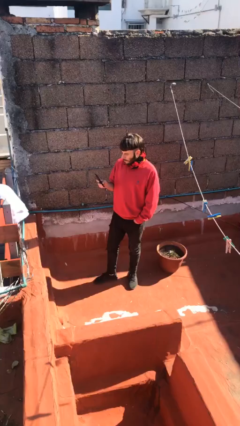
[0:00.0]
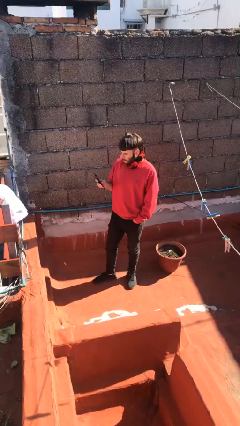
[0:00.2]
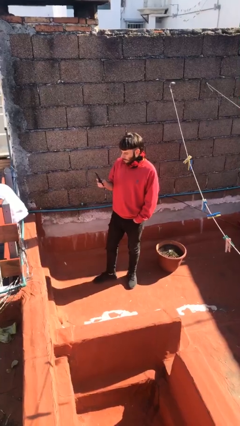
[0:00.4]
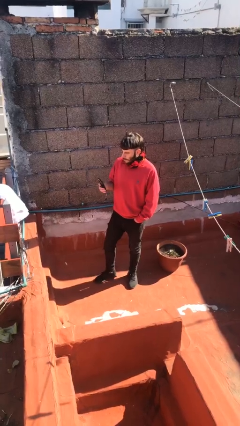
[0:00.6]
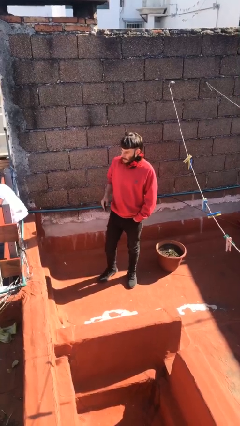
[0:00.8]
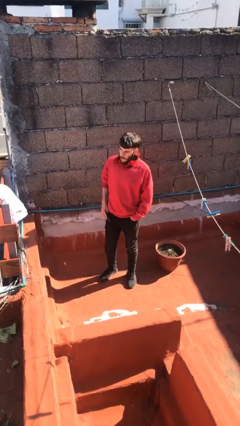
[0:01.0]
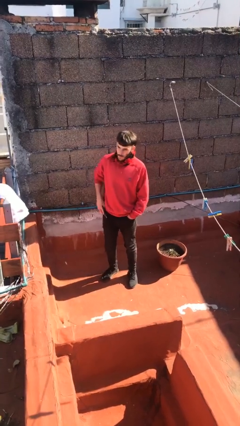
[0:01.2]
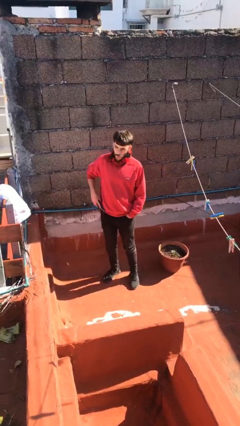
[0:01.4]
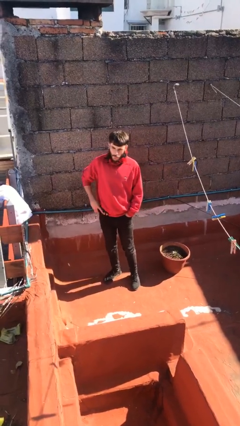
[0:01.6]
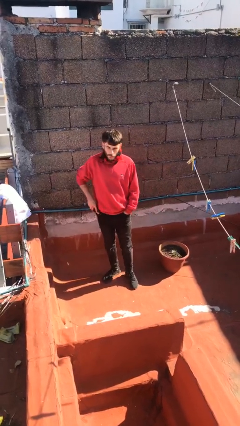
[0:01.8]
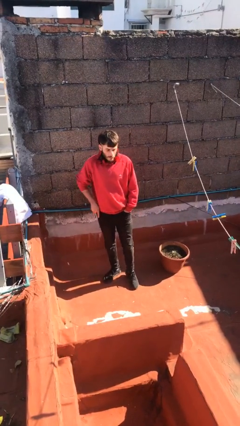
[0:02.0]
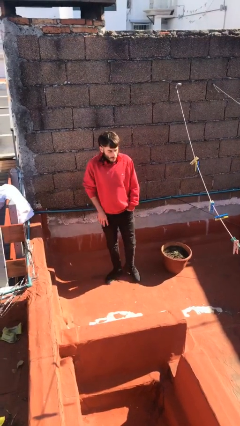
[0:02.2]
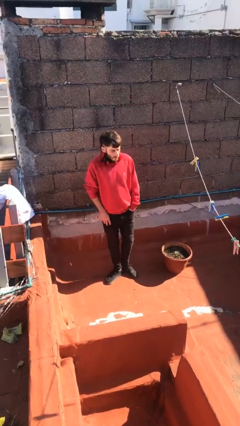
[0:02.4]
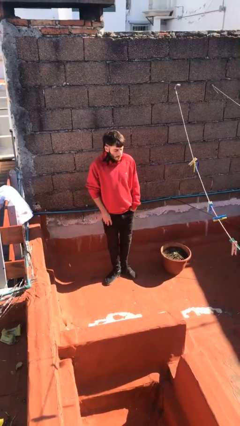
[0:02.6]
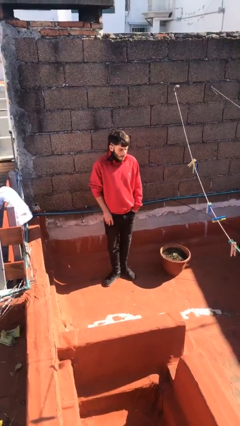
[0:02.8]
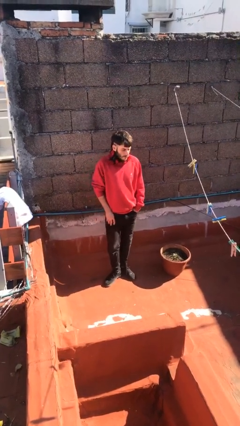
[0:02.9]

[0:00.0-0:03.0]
person puts phone into pocket

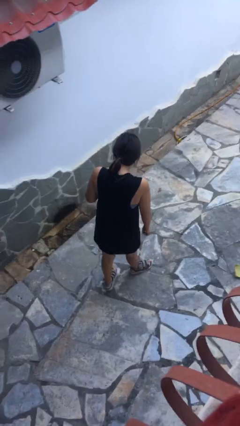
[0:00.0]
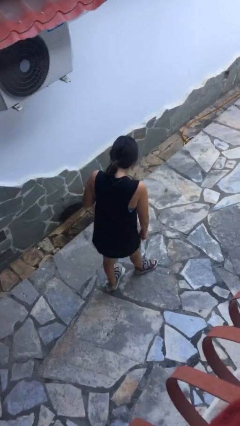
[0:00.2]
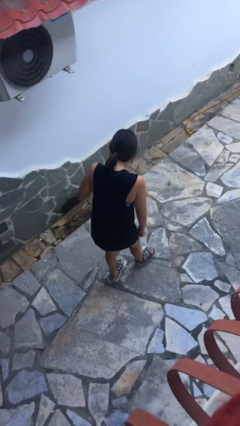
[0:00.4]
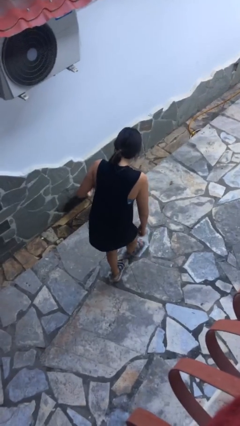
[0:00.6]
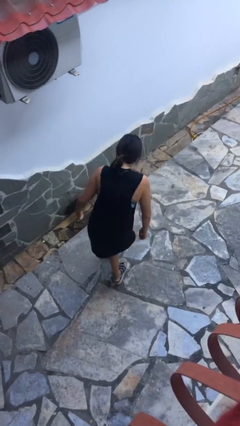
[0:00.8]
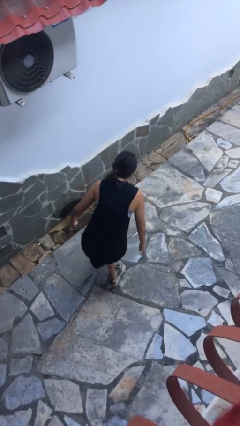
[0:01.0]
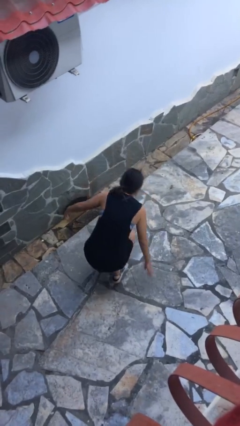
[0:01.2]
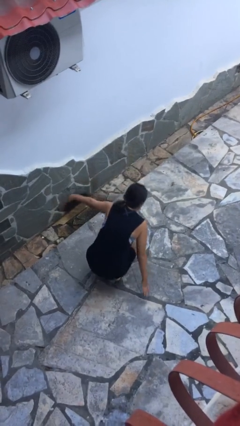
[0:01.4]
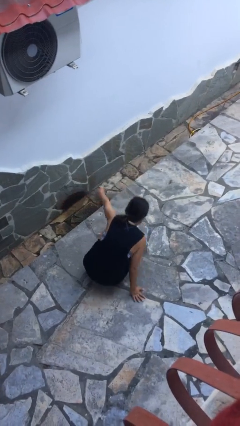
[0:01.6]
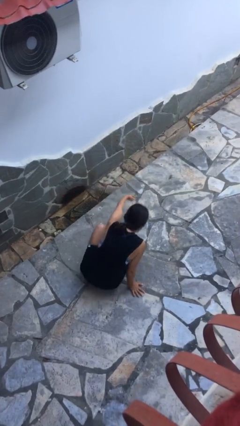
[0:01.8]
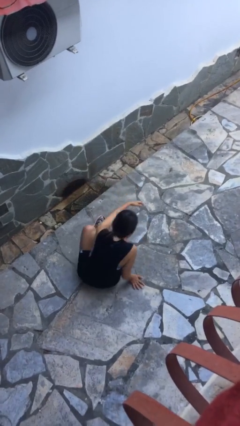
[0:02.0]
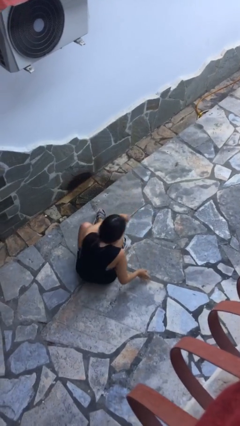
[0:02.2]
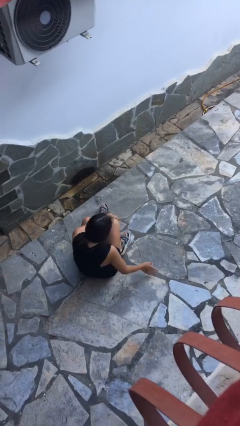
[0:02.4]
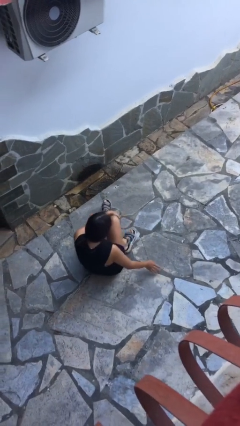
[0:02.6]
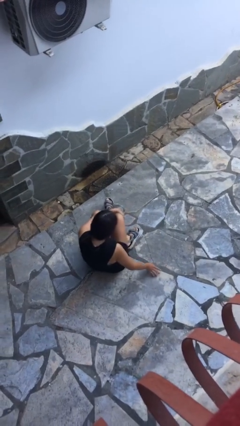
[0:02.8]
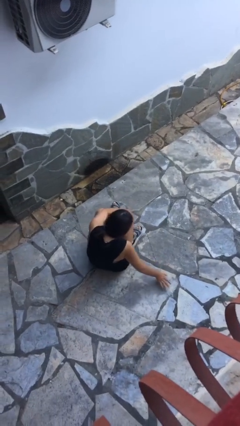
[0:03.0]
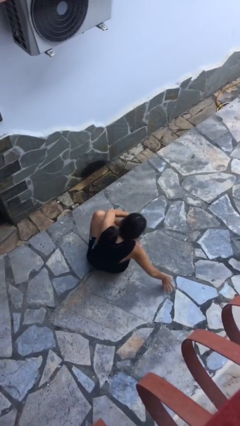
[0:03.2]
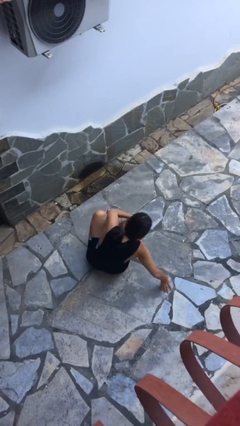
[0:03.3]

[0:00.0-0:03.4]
person sits crisscross

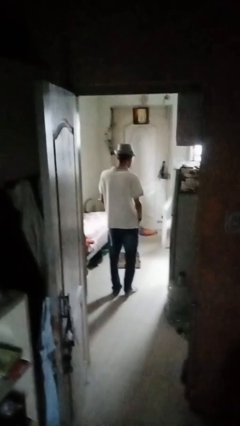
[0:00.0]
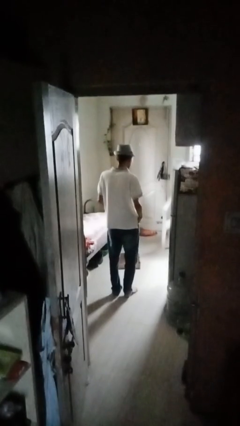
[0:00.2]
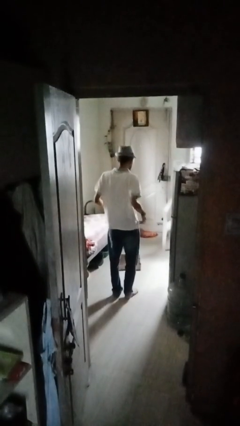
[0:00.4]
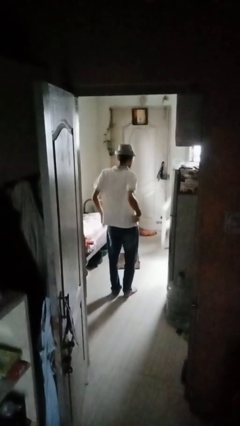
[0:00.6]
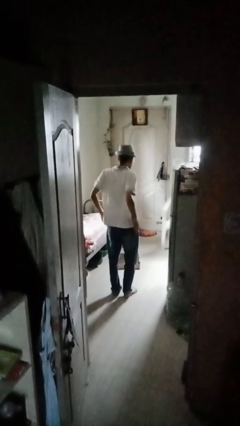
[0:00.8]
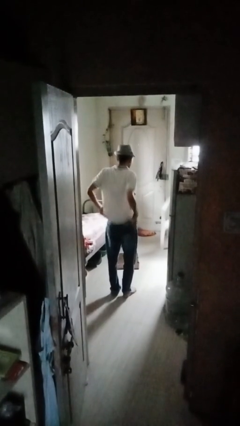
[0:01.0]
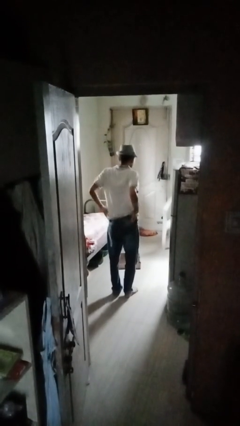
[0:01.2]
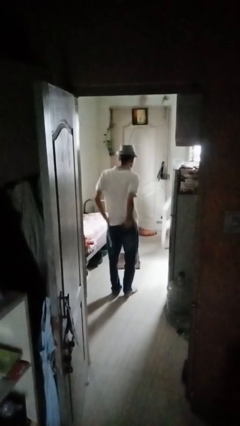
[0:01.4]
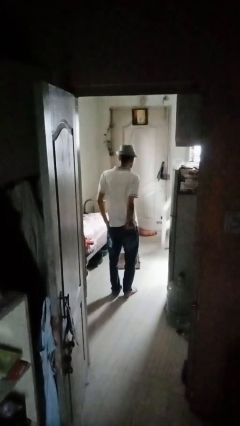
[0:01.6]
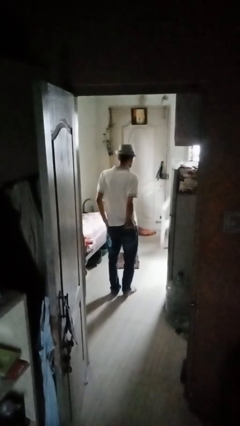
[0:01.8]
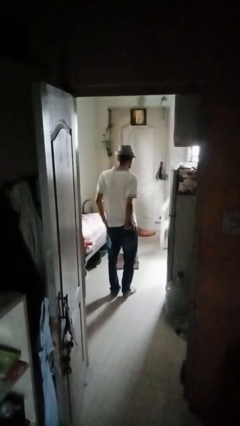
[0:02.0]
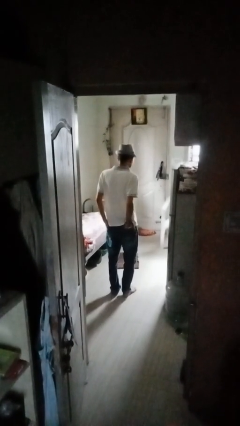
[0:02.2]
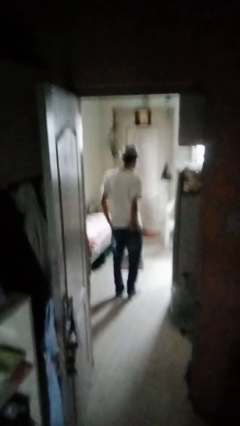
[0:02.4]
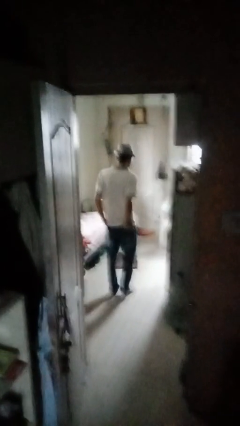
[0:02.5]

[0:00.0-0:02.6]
person puts hands in back pockets

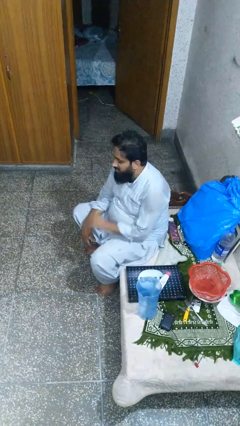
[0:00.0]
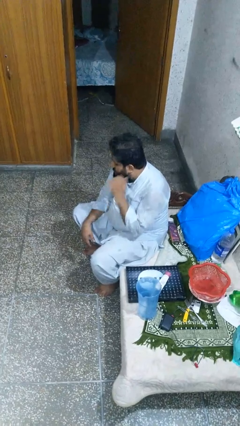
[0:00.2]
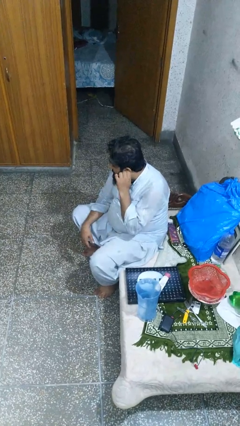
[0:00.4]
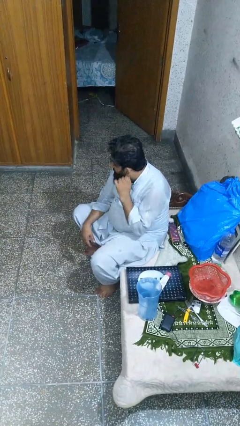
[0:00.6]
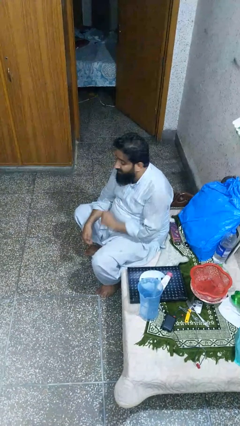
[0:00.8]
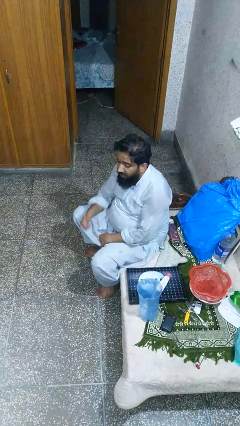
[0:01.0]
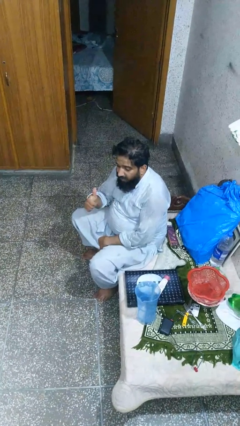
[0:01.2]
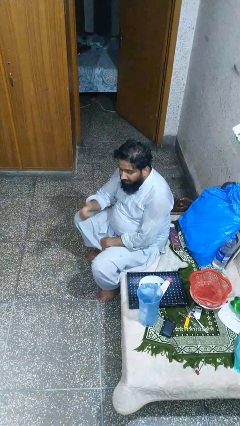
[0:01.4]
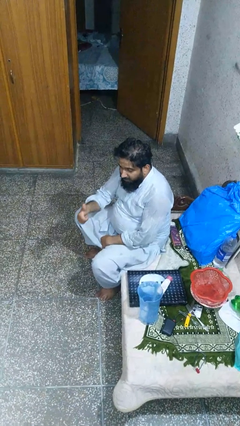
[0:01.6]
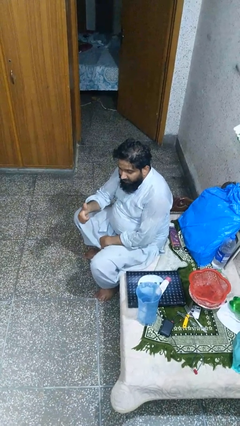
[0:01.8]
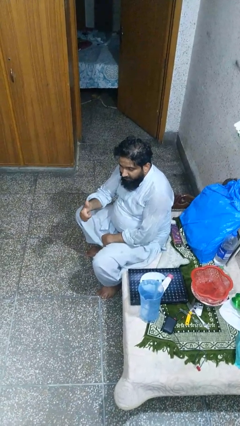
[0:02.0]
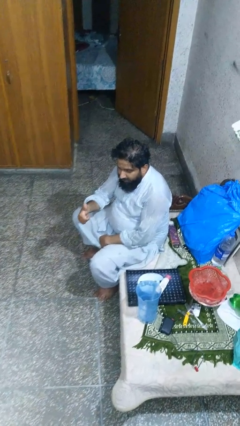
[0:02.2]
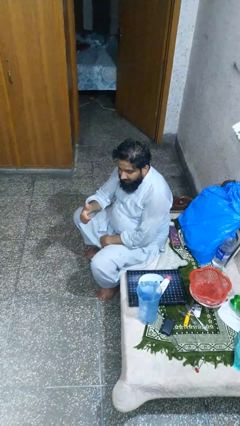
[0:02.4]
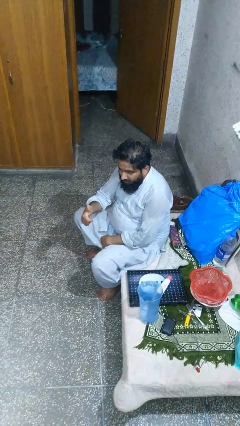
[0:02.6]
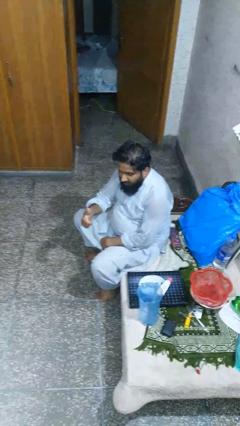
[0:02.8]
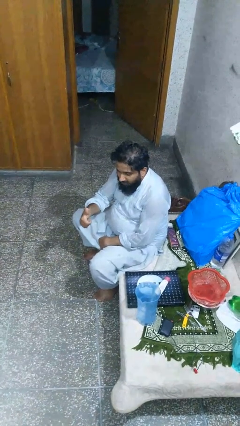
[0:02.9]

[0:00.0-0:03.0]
person gestures thumbs up

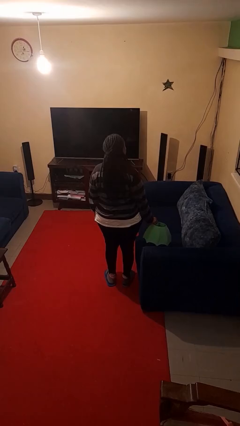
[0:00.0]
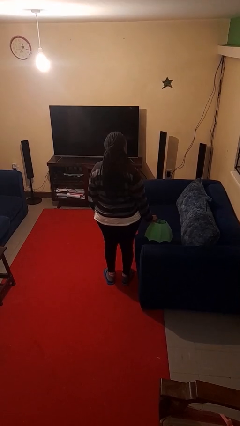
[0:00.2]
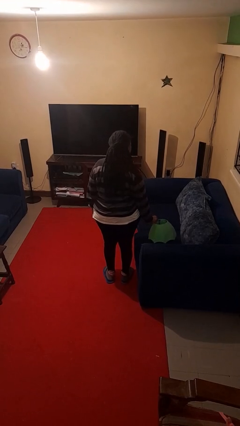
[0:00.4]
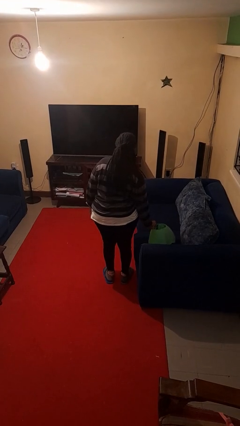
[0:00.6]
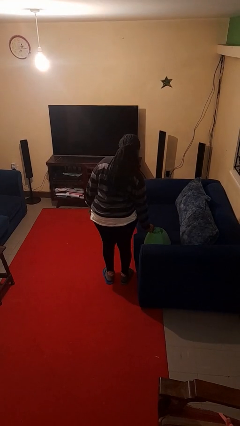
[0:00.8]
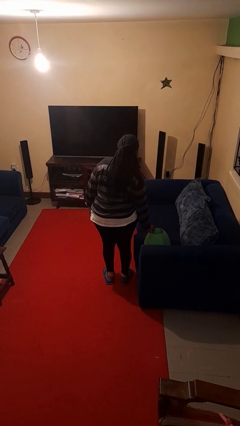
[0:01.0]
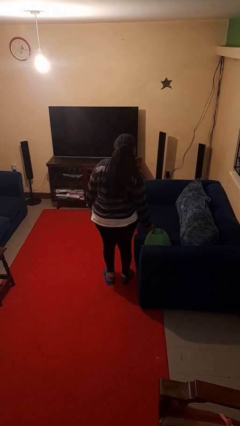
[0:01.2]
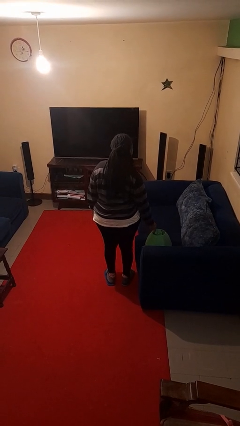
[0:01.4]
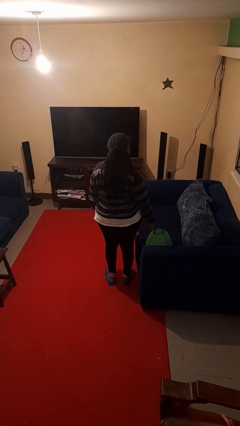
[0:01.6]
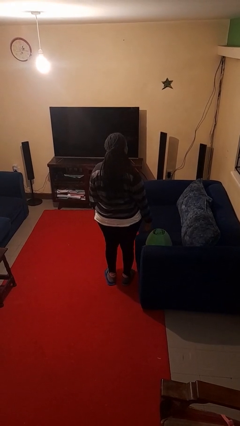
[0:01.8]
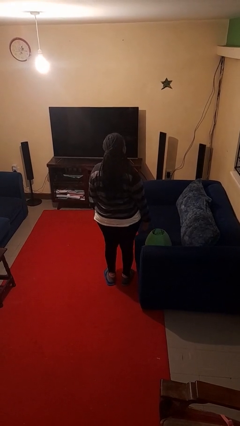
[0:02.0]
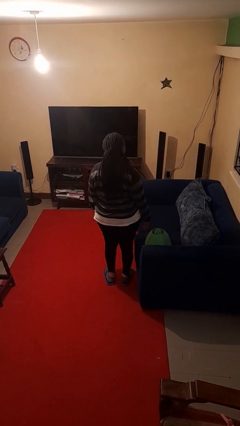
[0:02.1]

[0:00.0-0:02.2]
person puts down object on couch

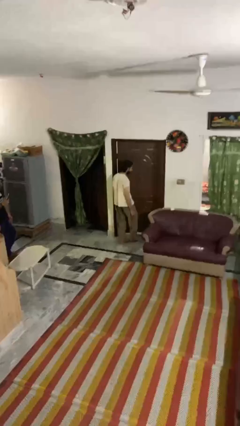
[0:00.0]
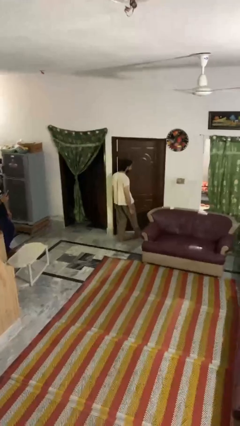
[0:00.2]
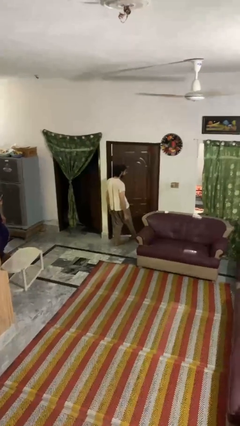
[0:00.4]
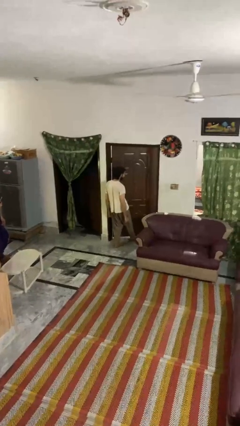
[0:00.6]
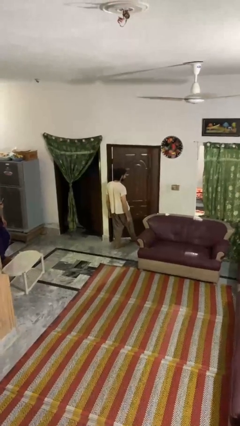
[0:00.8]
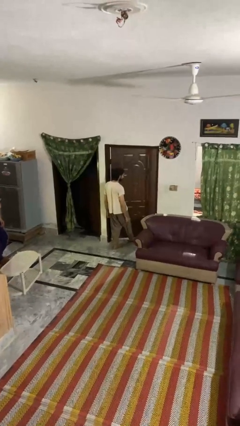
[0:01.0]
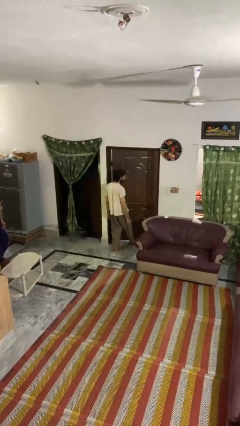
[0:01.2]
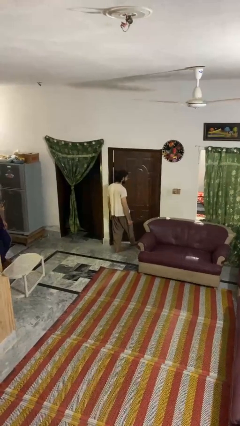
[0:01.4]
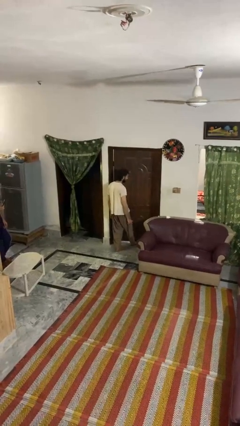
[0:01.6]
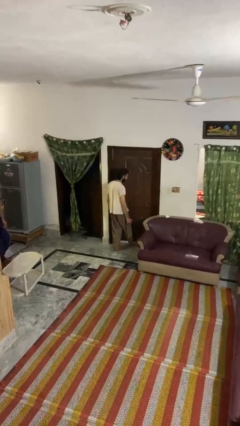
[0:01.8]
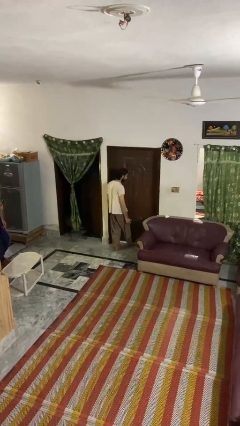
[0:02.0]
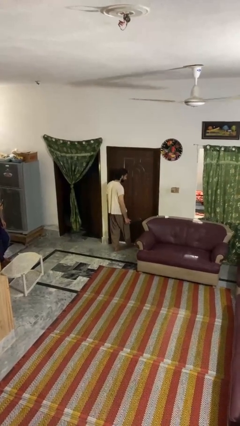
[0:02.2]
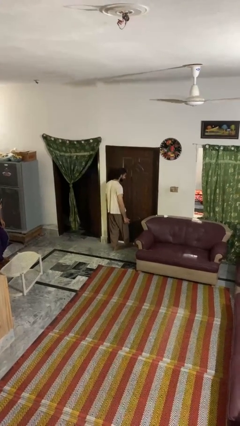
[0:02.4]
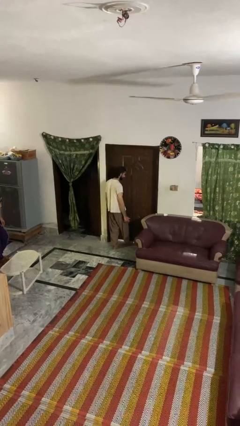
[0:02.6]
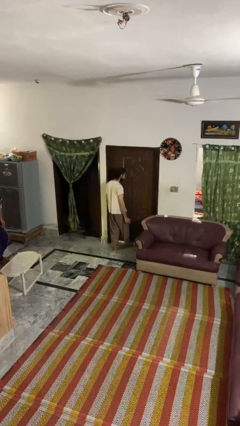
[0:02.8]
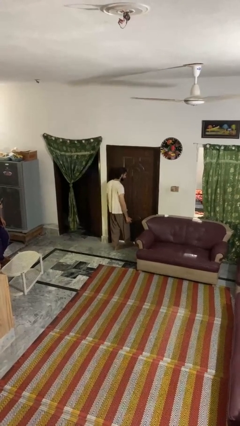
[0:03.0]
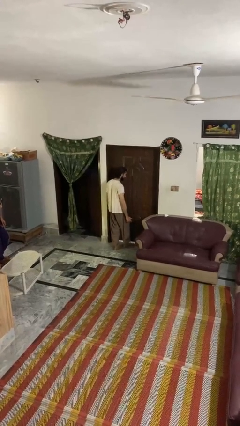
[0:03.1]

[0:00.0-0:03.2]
person closes door with foot

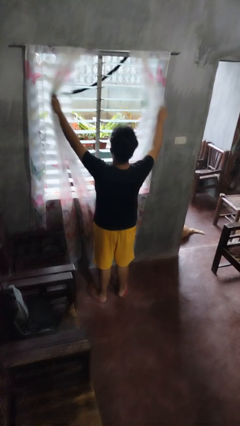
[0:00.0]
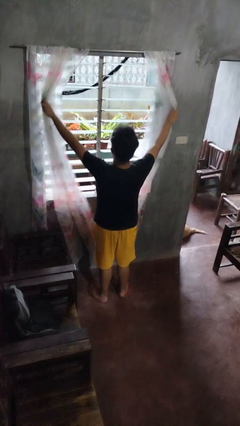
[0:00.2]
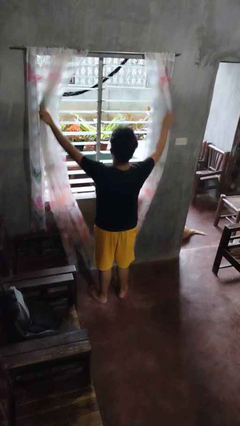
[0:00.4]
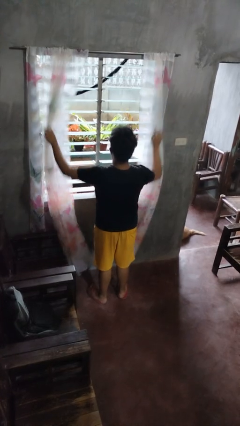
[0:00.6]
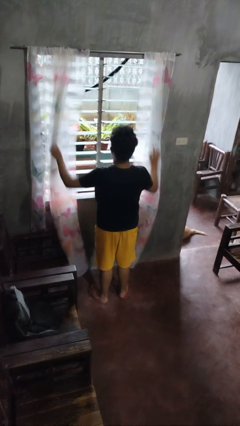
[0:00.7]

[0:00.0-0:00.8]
person opens curtains
